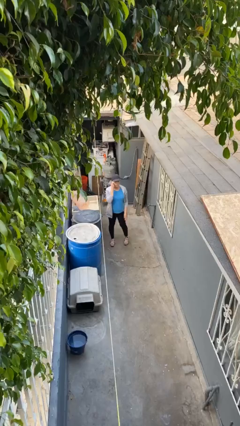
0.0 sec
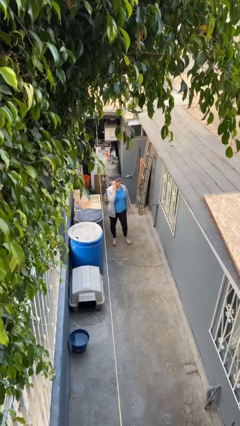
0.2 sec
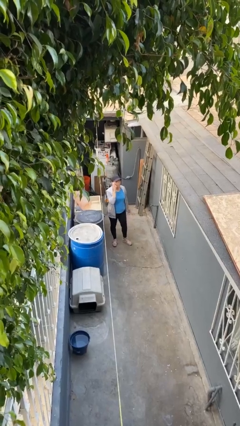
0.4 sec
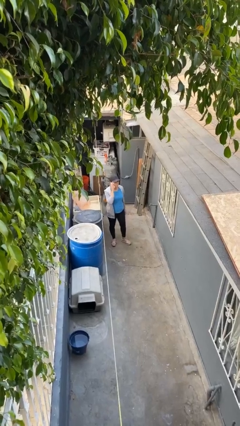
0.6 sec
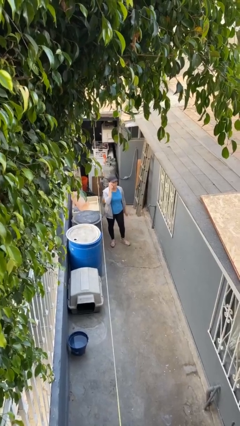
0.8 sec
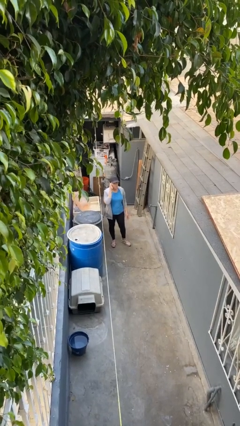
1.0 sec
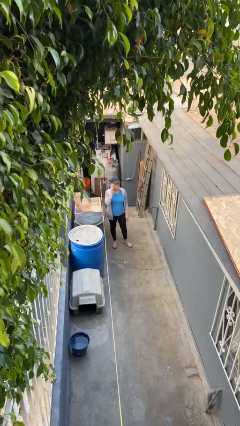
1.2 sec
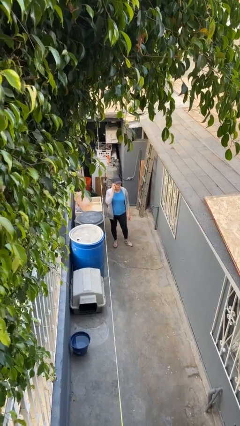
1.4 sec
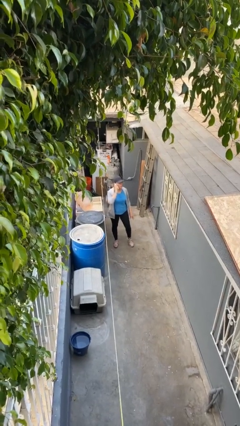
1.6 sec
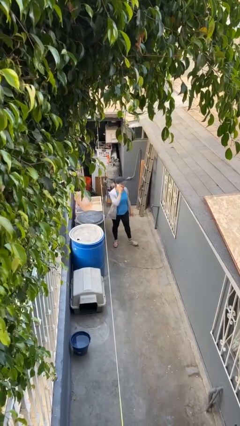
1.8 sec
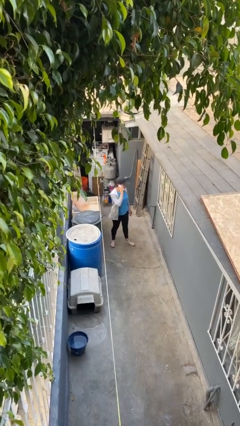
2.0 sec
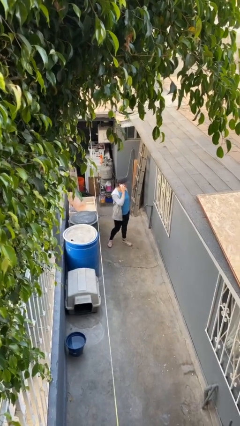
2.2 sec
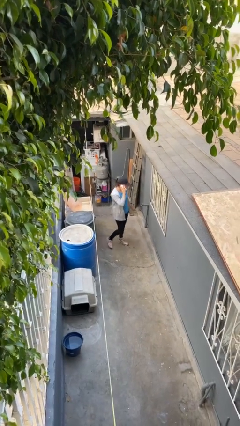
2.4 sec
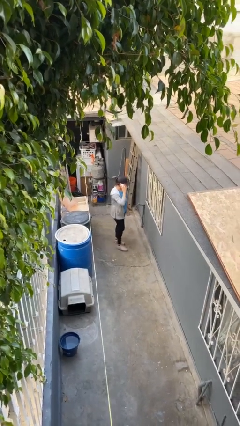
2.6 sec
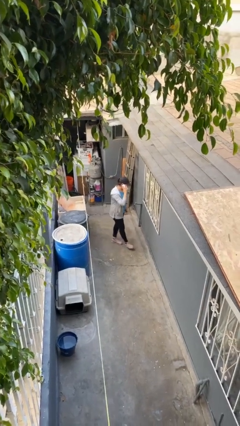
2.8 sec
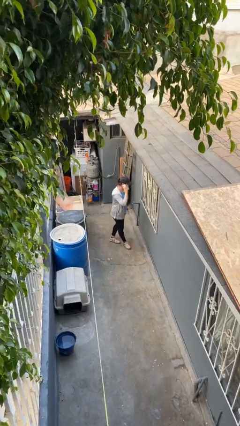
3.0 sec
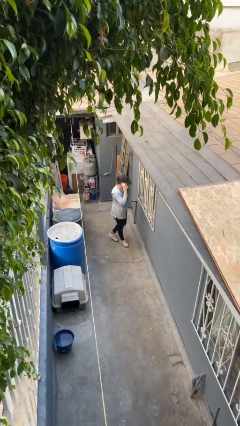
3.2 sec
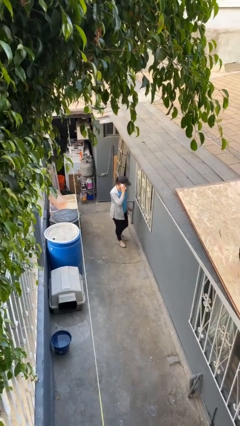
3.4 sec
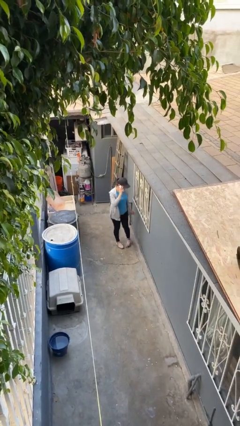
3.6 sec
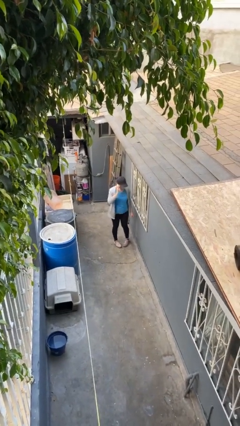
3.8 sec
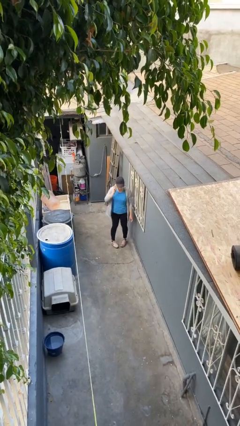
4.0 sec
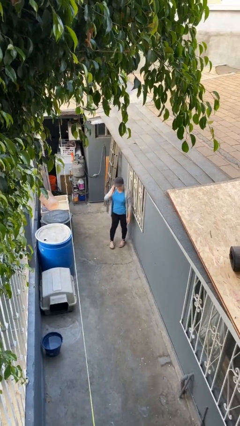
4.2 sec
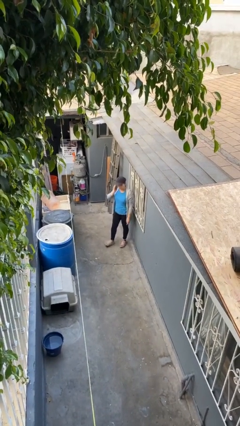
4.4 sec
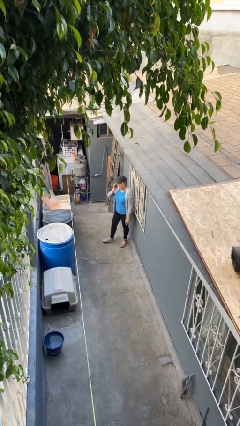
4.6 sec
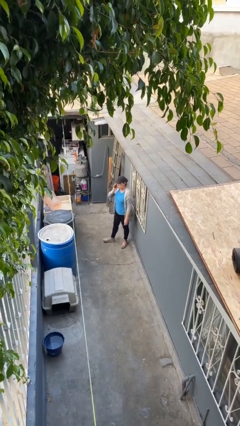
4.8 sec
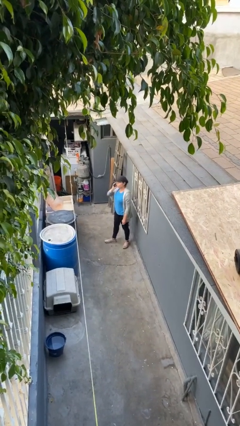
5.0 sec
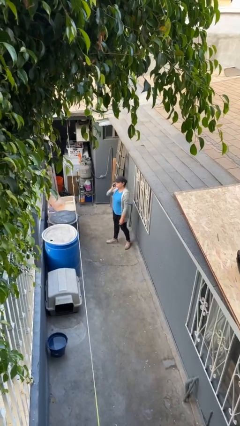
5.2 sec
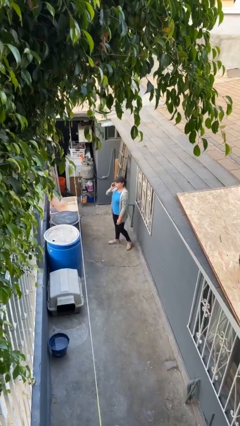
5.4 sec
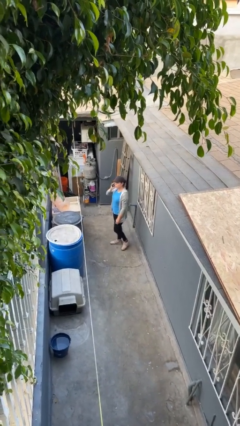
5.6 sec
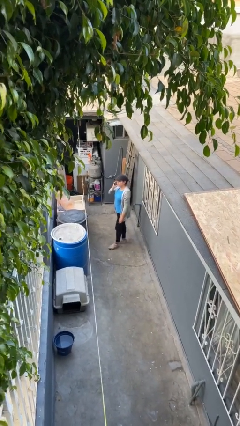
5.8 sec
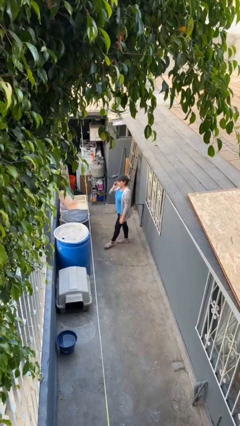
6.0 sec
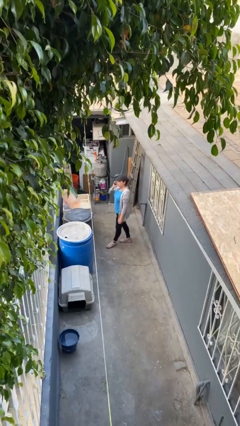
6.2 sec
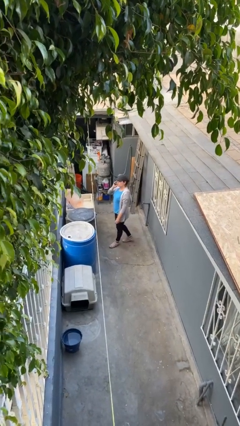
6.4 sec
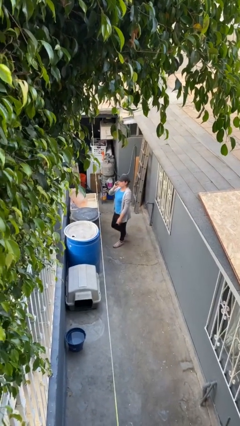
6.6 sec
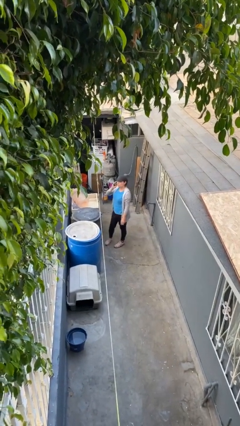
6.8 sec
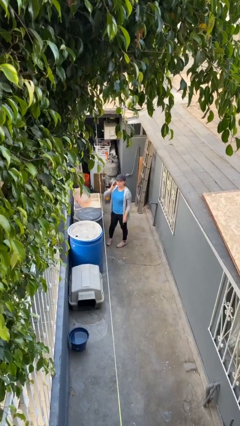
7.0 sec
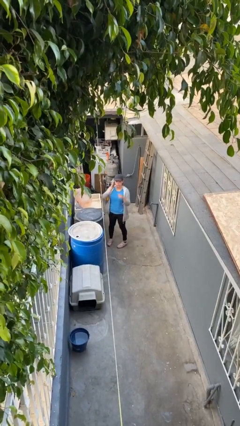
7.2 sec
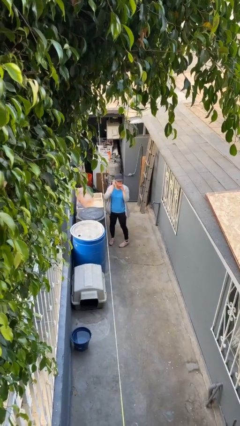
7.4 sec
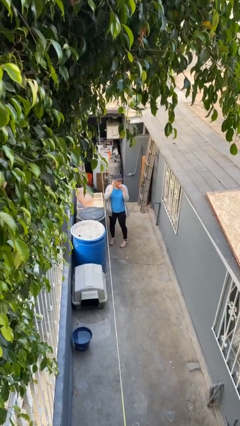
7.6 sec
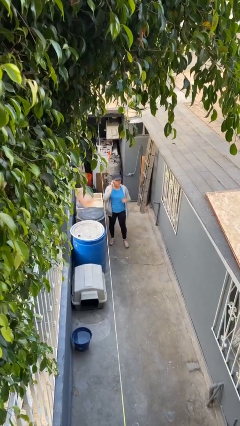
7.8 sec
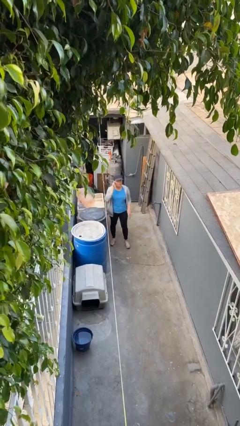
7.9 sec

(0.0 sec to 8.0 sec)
person talks on phone

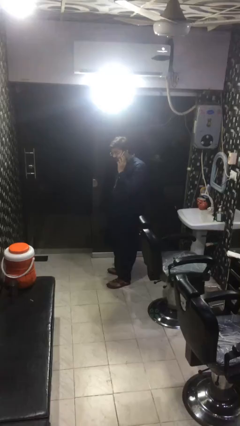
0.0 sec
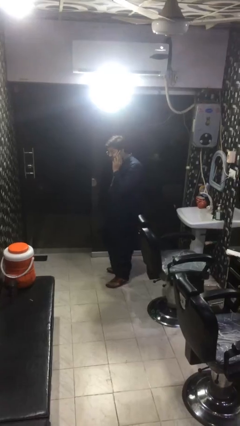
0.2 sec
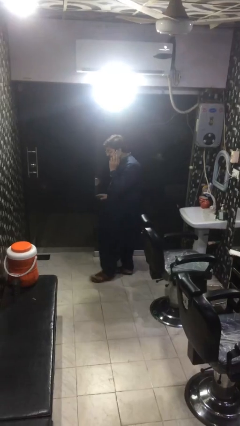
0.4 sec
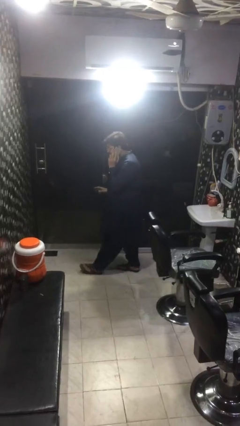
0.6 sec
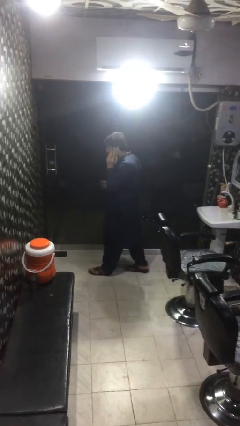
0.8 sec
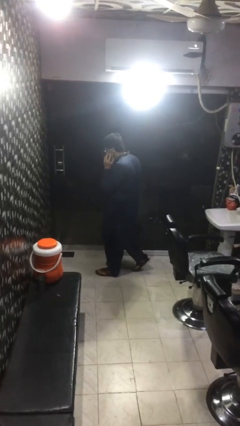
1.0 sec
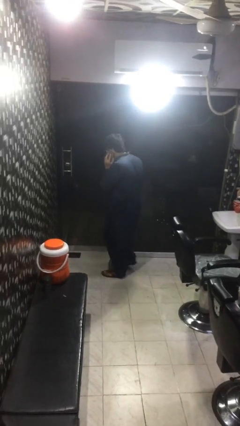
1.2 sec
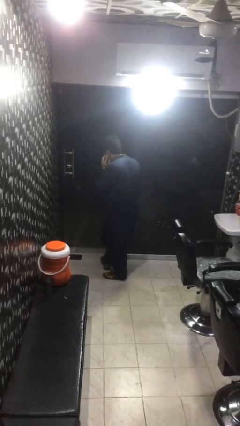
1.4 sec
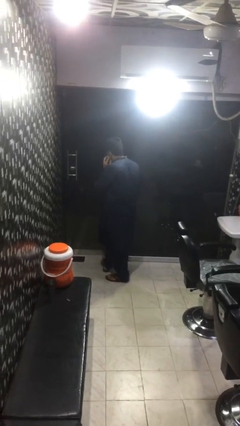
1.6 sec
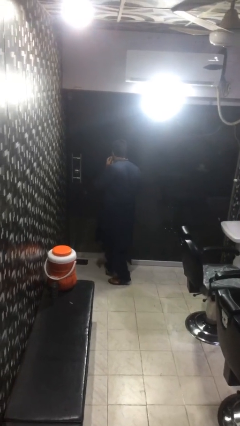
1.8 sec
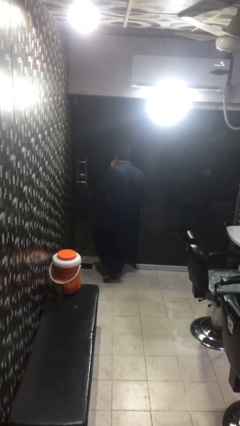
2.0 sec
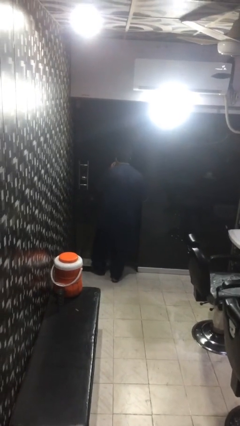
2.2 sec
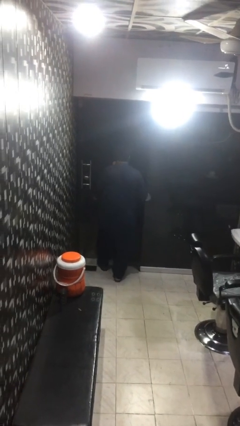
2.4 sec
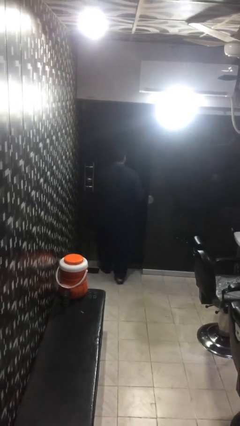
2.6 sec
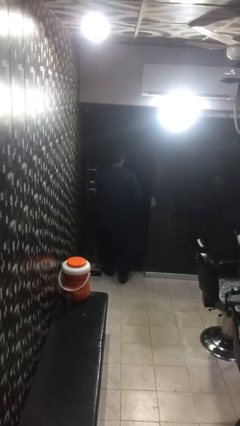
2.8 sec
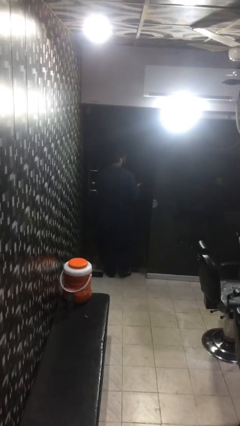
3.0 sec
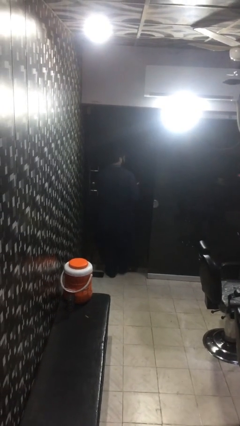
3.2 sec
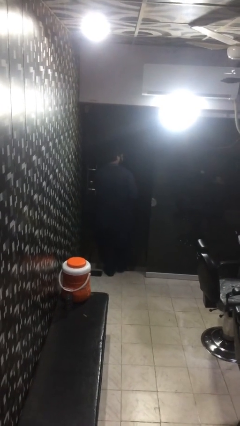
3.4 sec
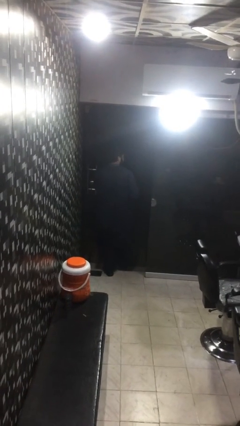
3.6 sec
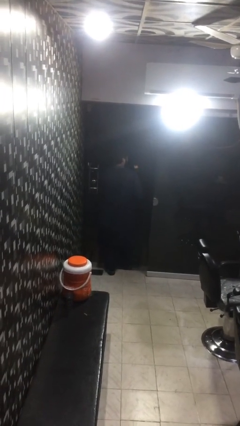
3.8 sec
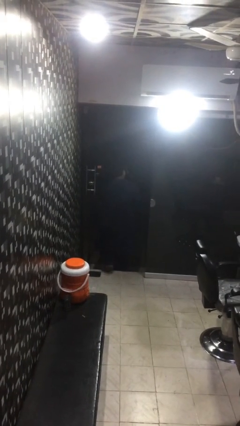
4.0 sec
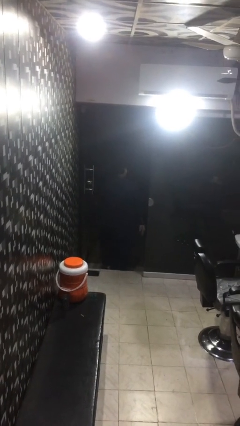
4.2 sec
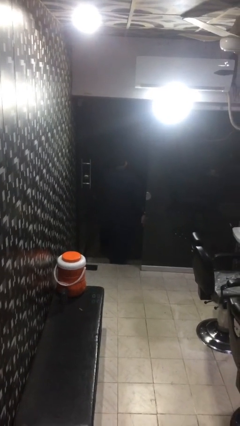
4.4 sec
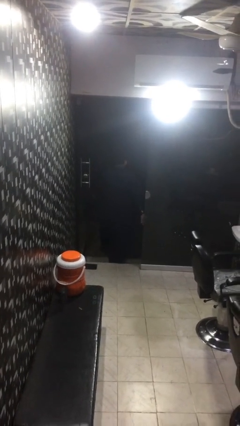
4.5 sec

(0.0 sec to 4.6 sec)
person exits scene through structure

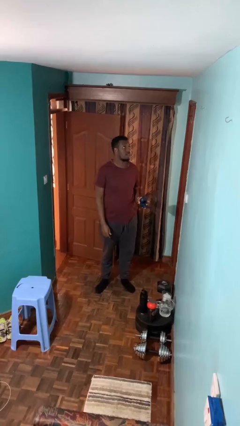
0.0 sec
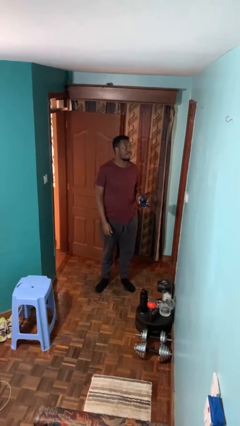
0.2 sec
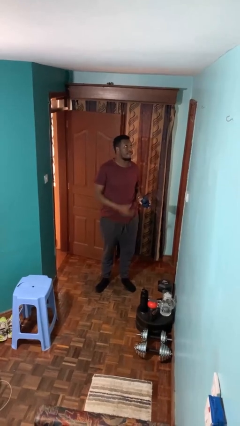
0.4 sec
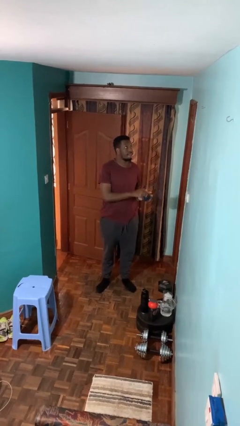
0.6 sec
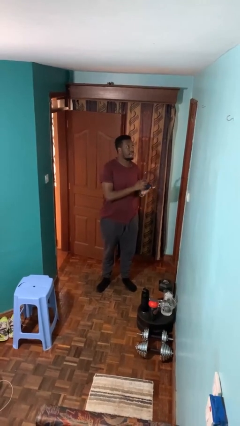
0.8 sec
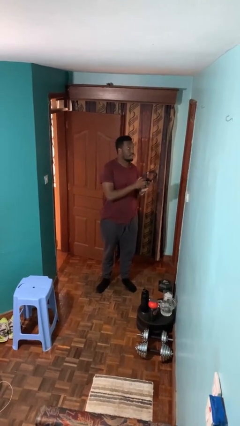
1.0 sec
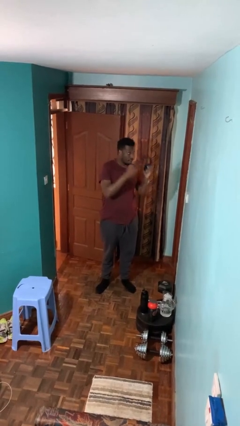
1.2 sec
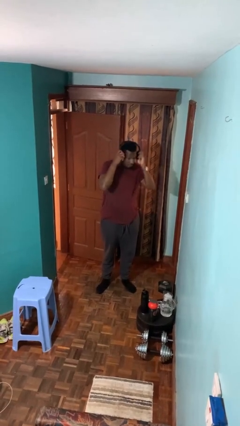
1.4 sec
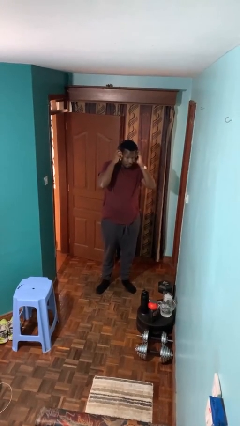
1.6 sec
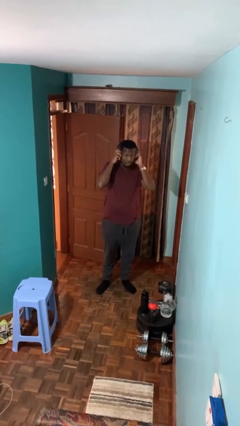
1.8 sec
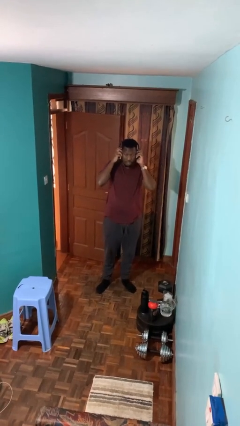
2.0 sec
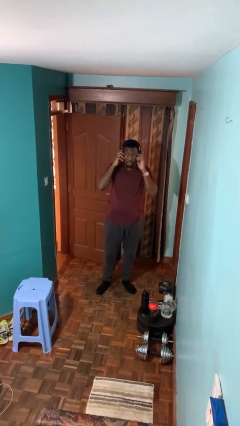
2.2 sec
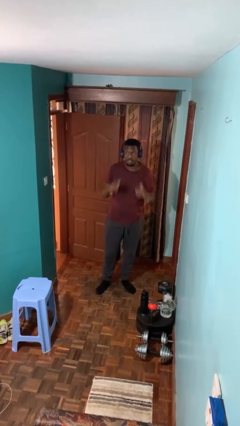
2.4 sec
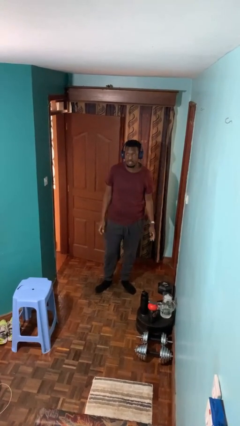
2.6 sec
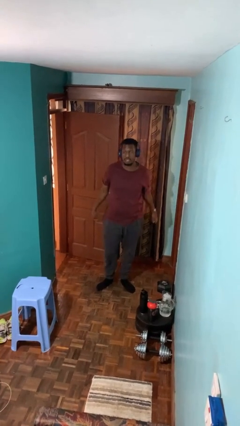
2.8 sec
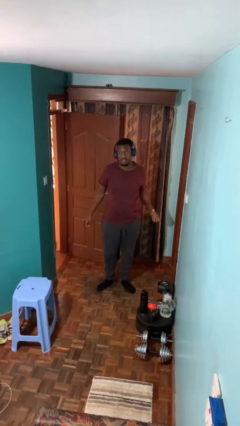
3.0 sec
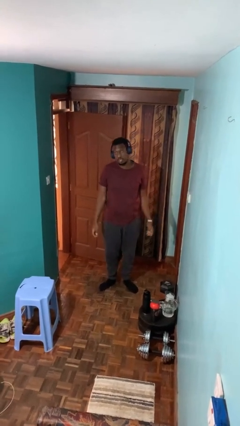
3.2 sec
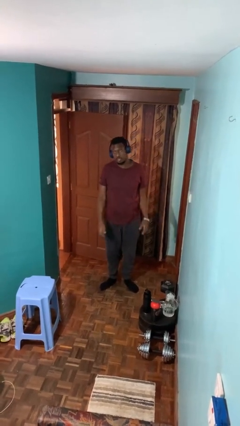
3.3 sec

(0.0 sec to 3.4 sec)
person puts on headphones

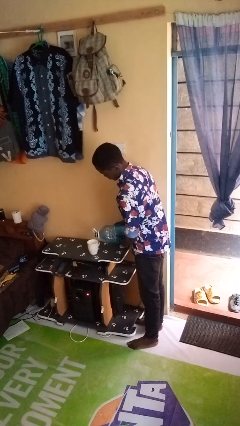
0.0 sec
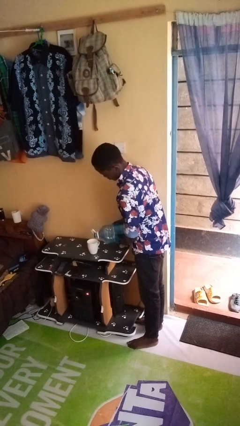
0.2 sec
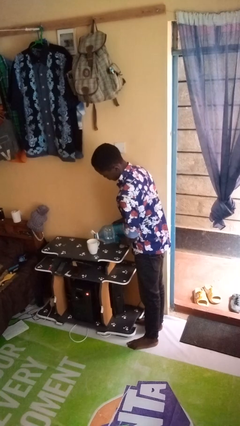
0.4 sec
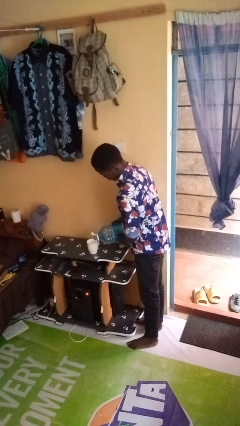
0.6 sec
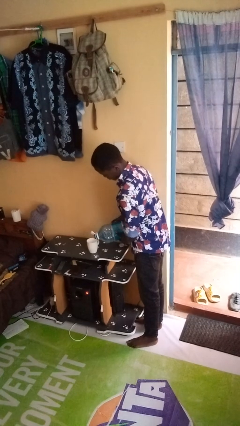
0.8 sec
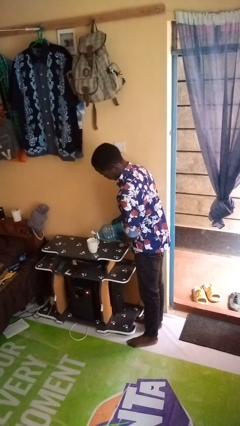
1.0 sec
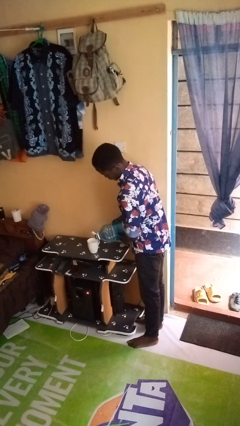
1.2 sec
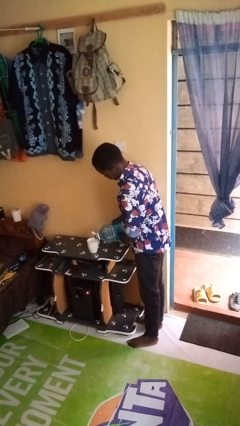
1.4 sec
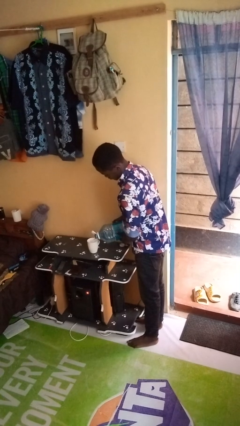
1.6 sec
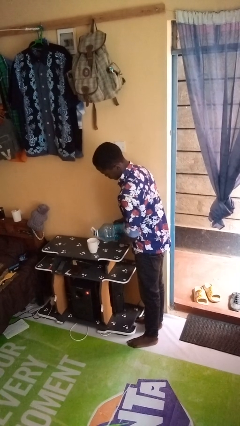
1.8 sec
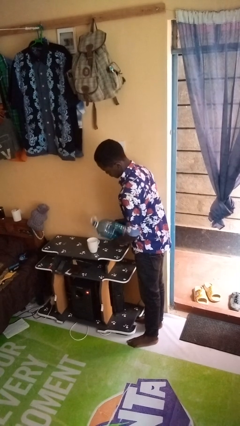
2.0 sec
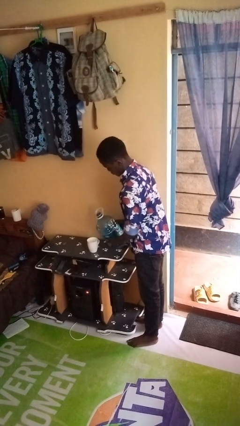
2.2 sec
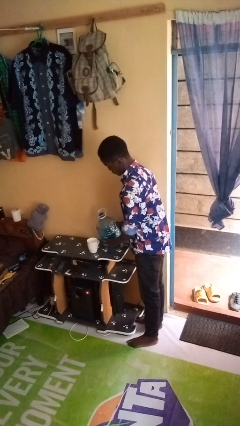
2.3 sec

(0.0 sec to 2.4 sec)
person pours liquid into cup
